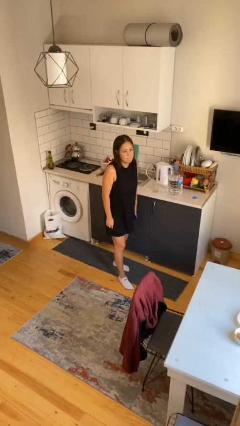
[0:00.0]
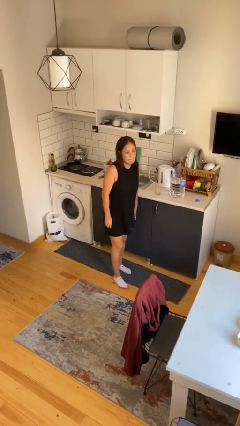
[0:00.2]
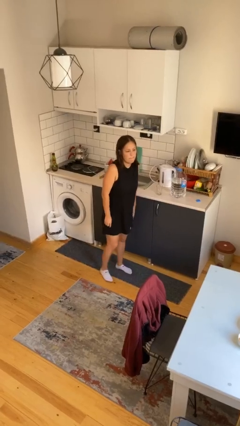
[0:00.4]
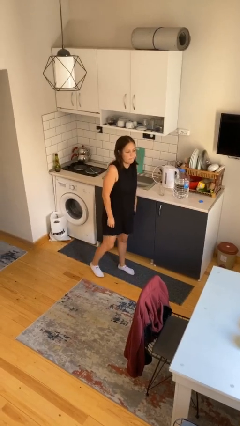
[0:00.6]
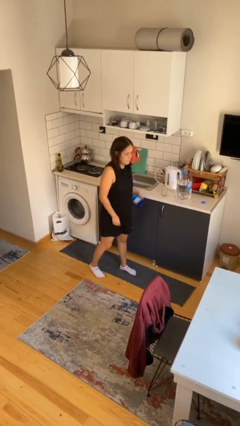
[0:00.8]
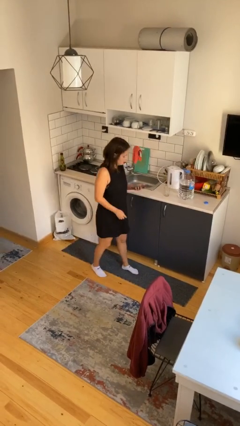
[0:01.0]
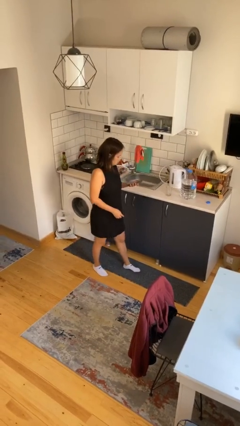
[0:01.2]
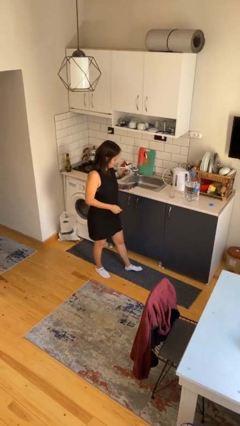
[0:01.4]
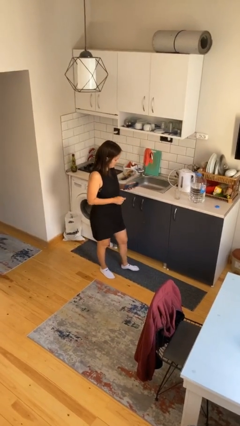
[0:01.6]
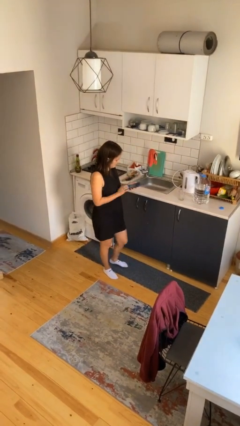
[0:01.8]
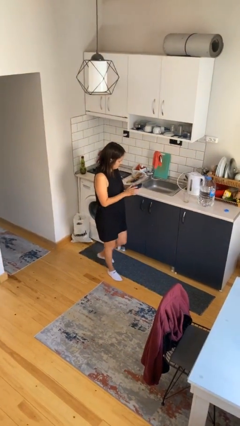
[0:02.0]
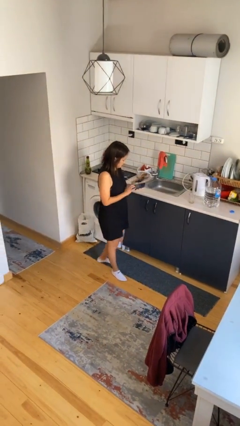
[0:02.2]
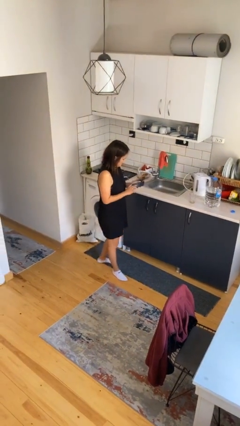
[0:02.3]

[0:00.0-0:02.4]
person takes phone from pocket

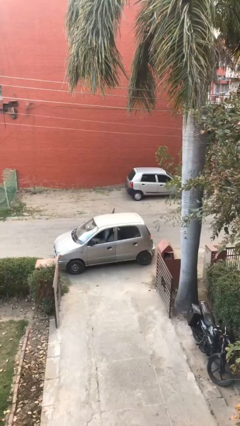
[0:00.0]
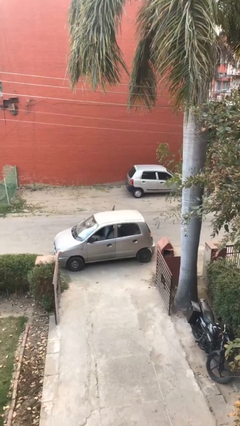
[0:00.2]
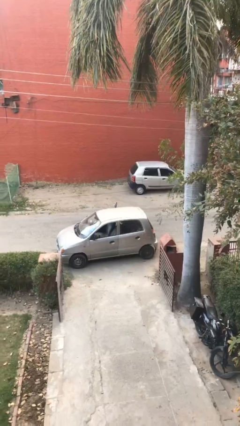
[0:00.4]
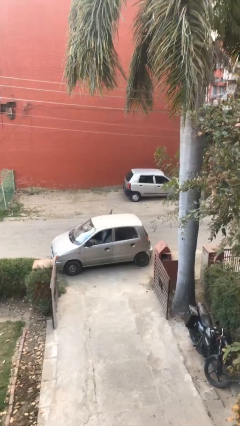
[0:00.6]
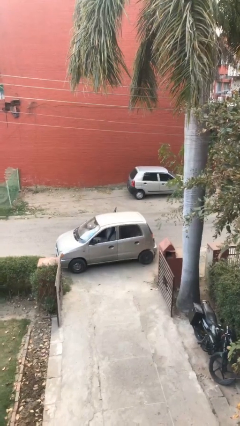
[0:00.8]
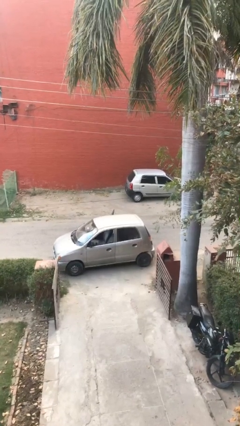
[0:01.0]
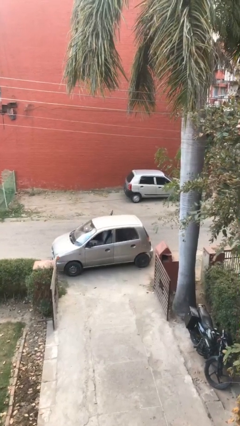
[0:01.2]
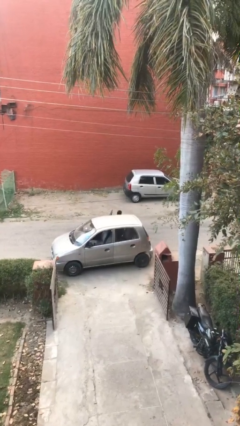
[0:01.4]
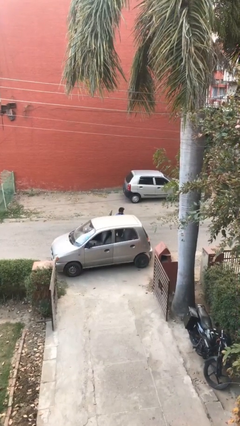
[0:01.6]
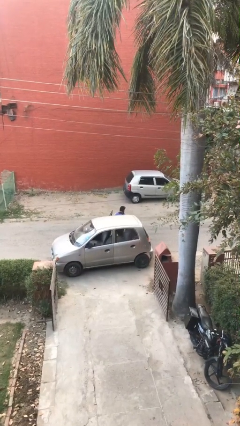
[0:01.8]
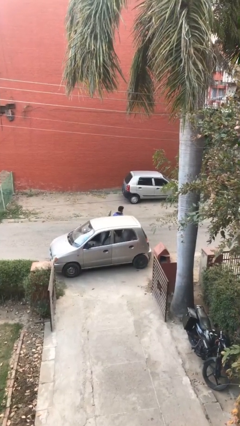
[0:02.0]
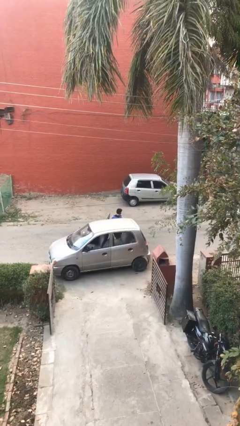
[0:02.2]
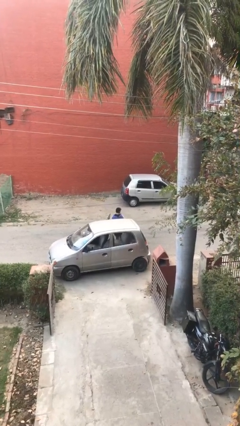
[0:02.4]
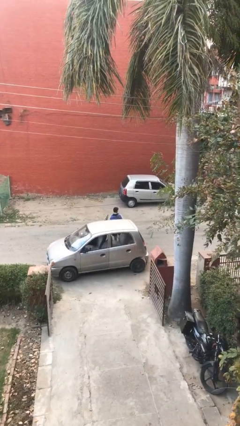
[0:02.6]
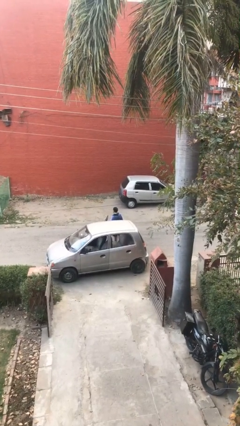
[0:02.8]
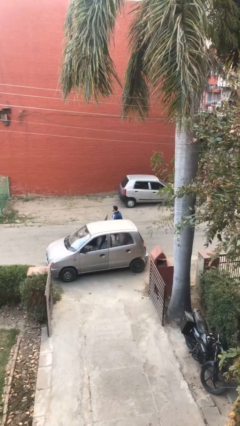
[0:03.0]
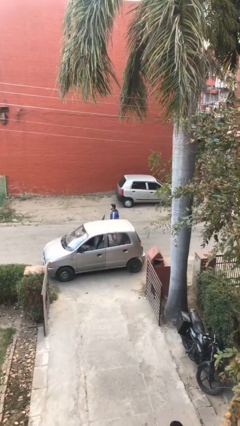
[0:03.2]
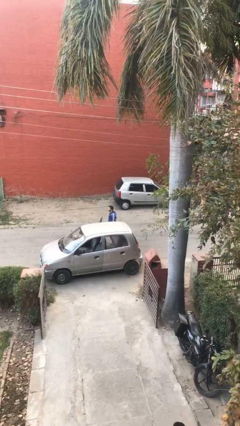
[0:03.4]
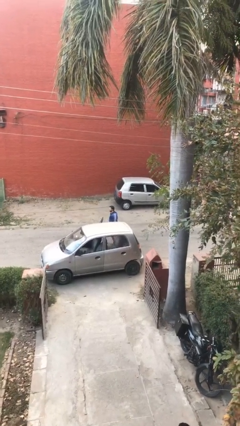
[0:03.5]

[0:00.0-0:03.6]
person exits car

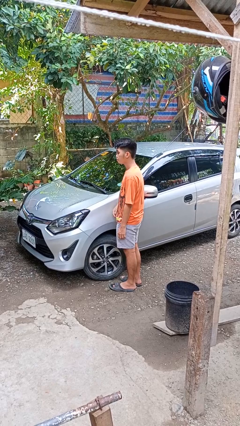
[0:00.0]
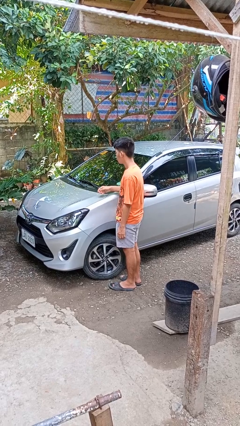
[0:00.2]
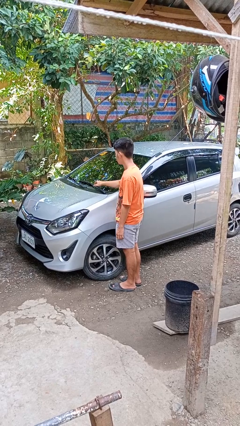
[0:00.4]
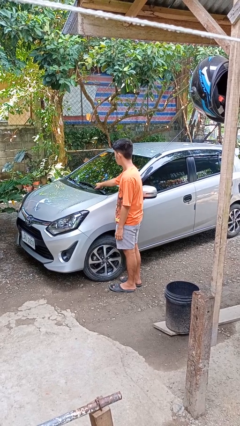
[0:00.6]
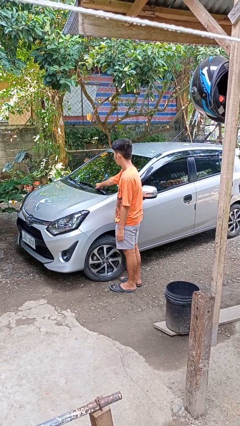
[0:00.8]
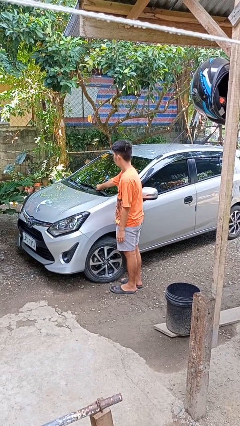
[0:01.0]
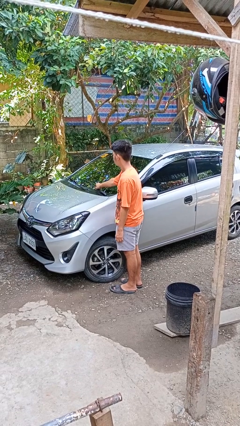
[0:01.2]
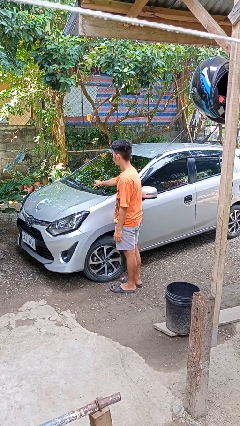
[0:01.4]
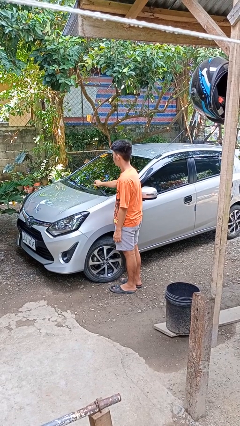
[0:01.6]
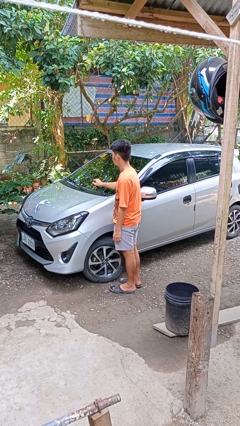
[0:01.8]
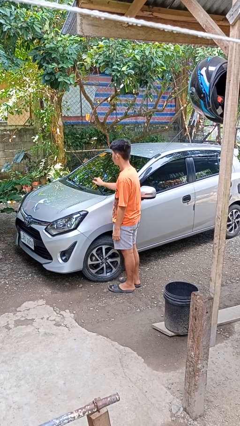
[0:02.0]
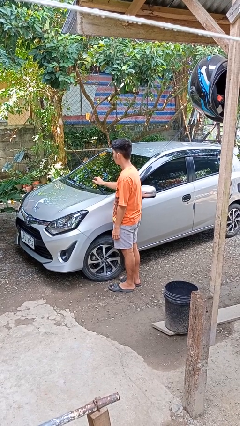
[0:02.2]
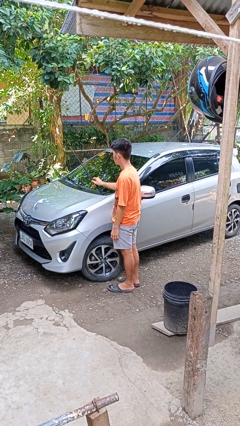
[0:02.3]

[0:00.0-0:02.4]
person flips up car wipers

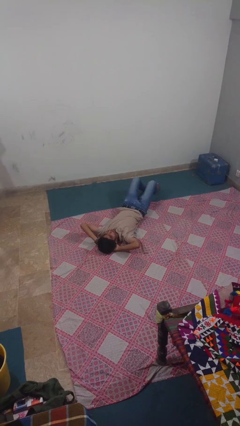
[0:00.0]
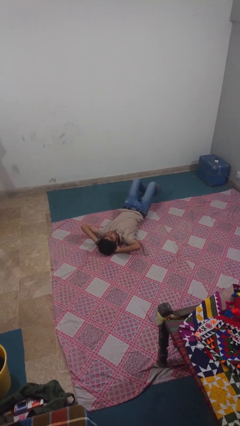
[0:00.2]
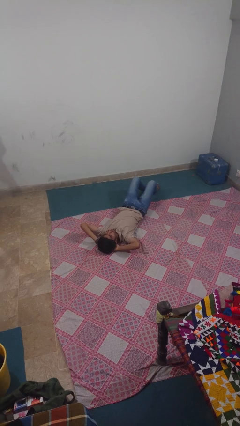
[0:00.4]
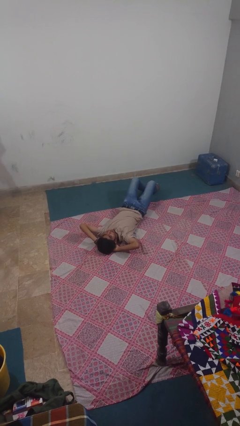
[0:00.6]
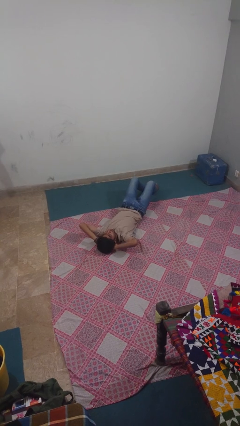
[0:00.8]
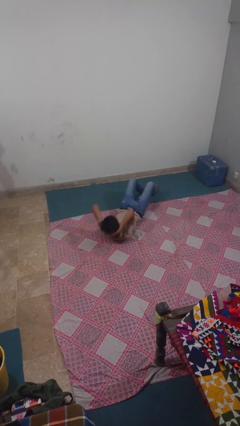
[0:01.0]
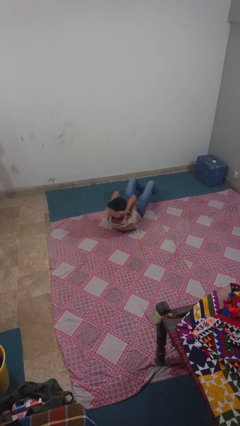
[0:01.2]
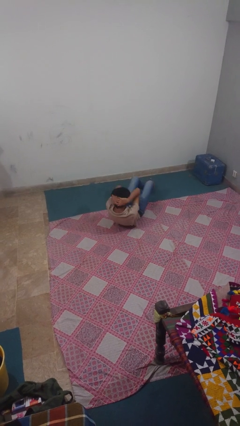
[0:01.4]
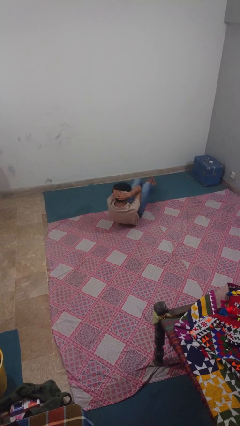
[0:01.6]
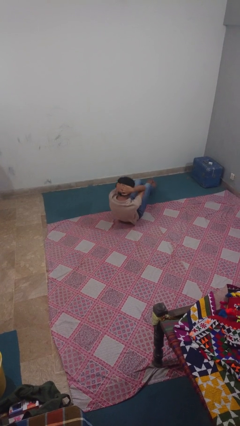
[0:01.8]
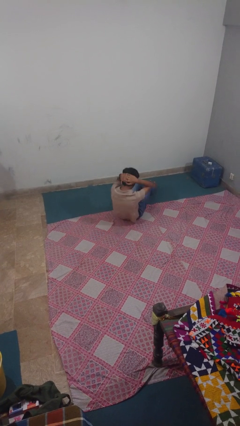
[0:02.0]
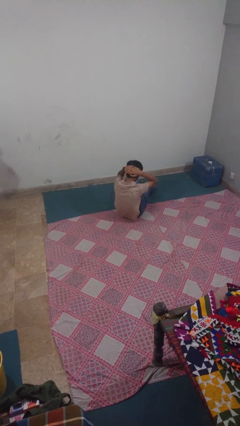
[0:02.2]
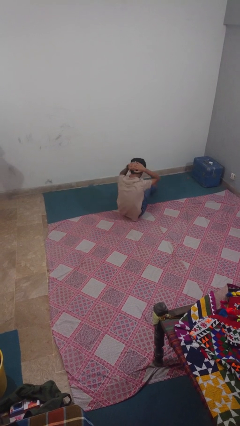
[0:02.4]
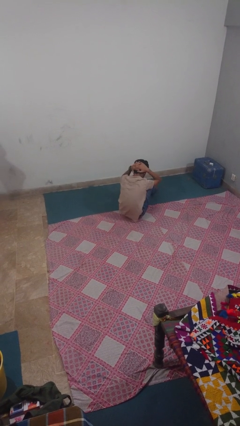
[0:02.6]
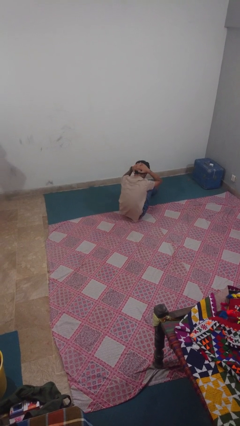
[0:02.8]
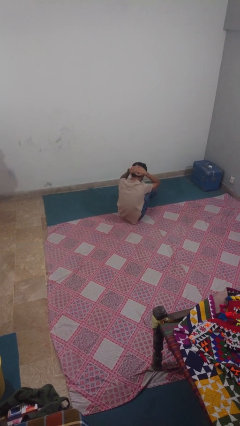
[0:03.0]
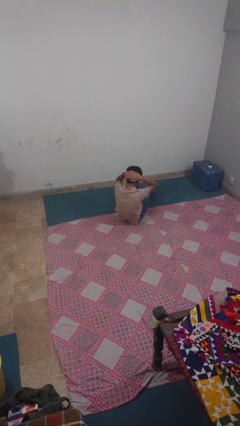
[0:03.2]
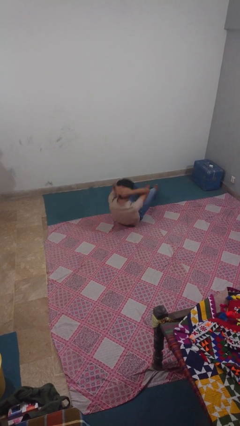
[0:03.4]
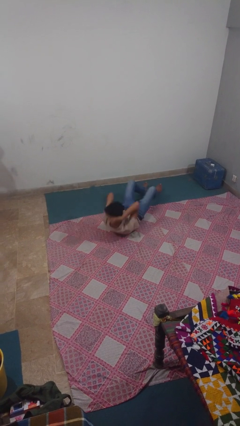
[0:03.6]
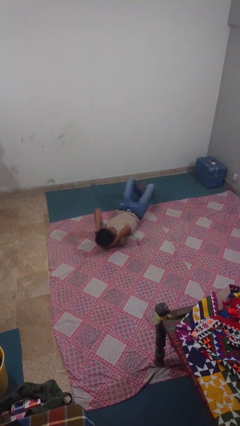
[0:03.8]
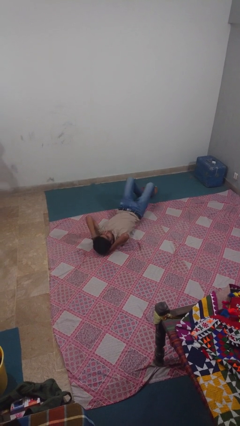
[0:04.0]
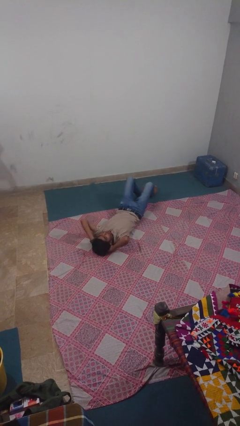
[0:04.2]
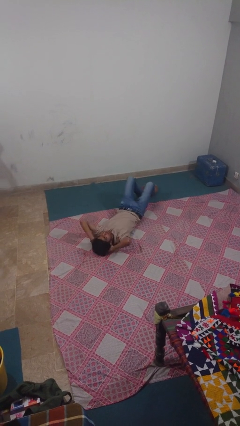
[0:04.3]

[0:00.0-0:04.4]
person exercises with situp

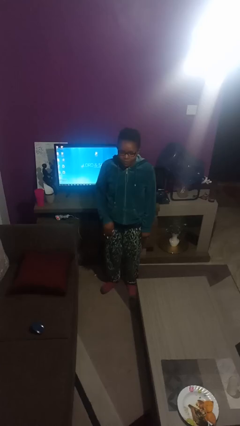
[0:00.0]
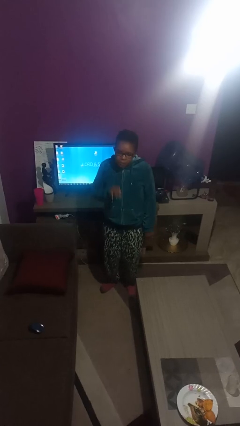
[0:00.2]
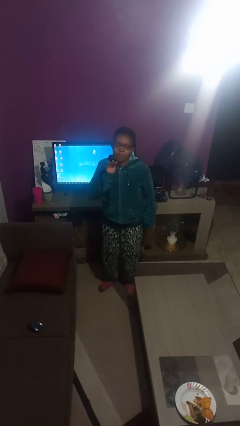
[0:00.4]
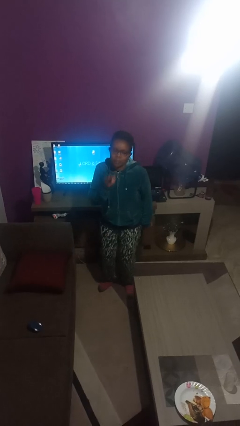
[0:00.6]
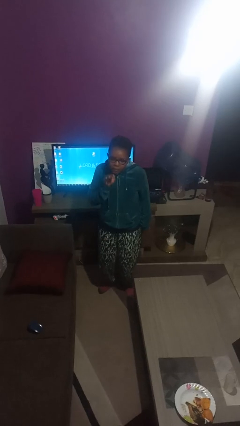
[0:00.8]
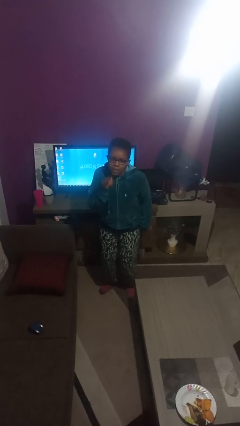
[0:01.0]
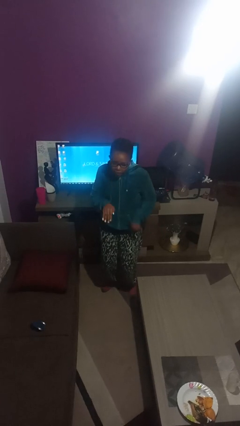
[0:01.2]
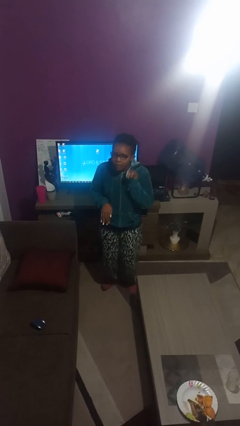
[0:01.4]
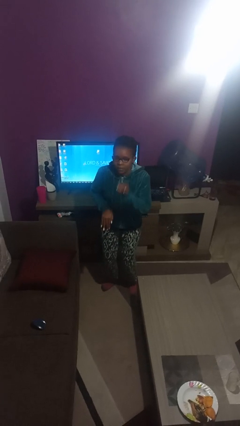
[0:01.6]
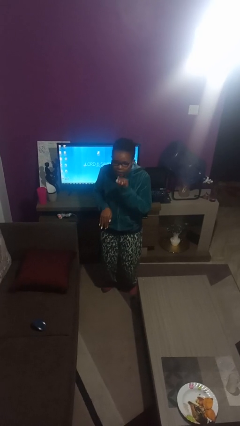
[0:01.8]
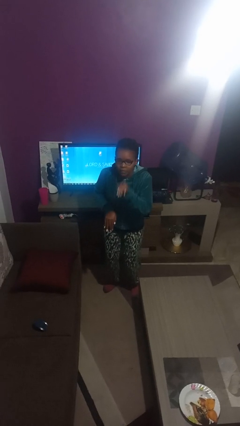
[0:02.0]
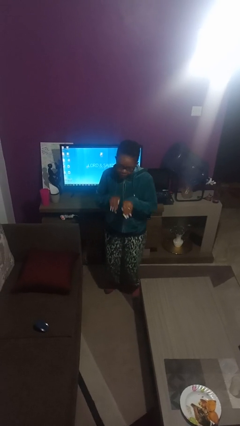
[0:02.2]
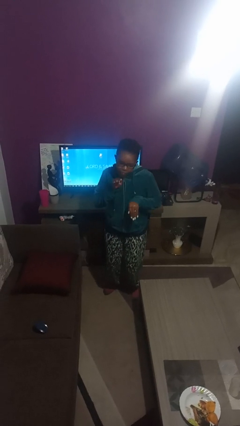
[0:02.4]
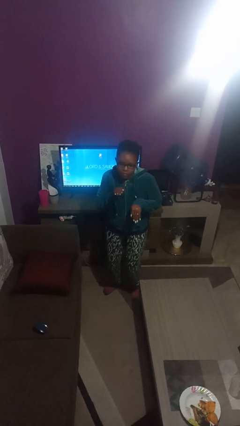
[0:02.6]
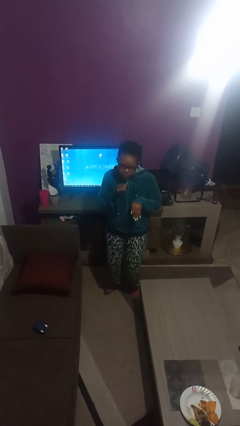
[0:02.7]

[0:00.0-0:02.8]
person dances in place

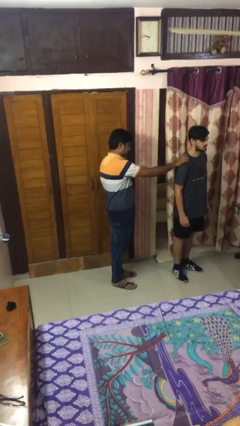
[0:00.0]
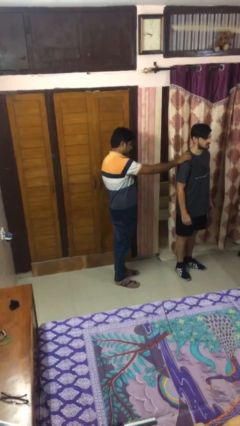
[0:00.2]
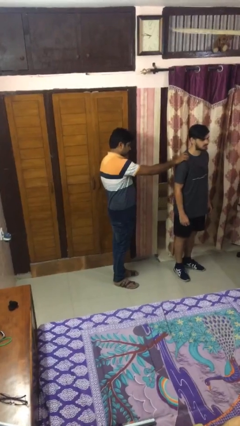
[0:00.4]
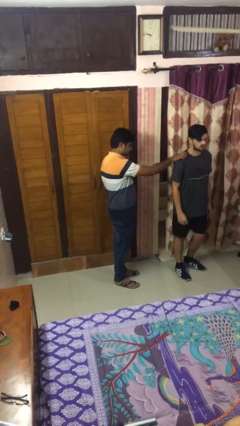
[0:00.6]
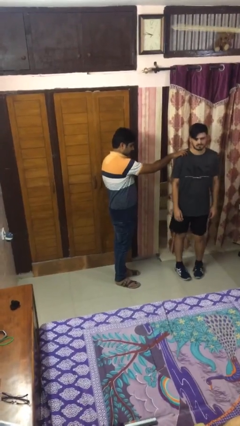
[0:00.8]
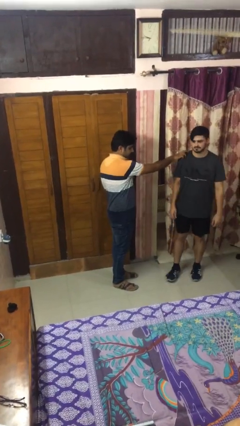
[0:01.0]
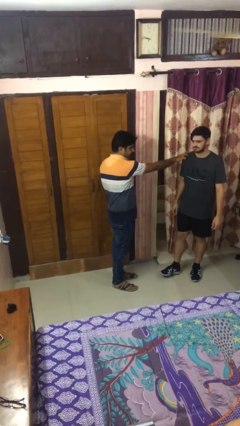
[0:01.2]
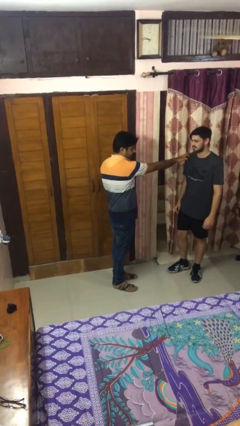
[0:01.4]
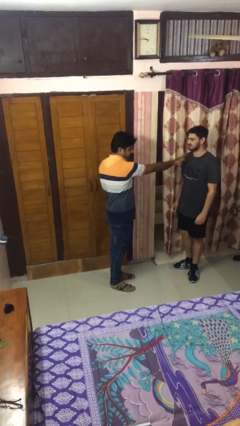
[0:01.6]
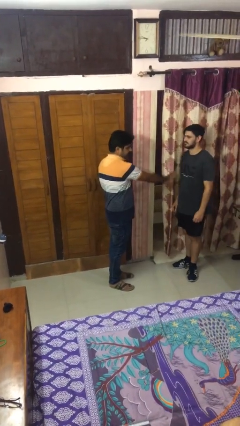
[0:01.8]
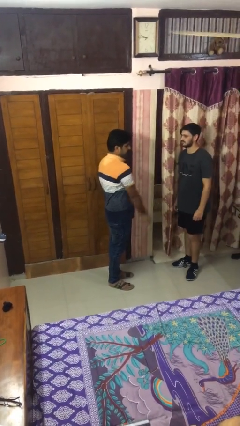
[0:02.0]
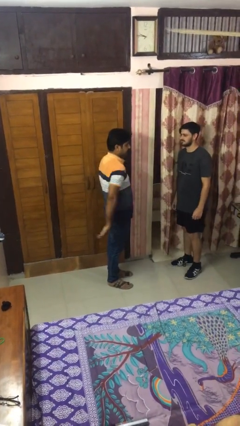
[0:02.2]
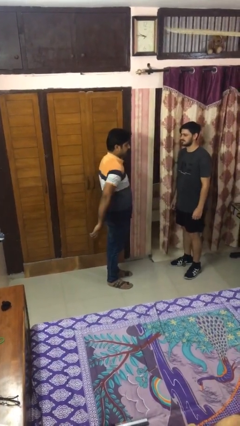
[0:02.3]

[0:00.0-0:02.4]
person spins person around
